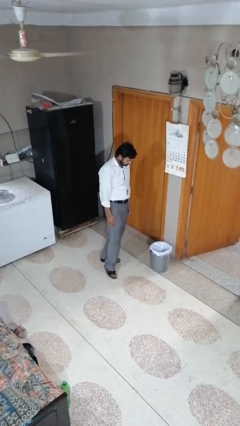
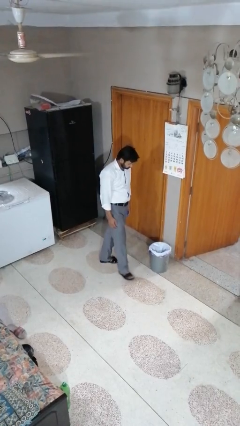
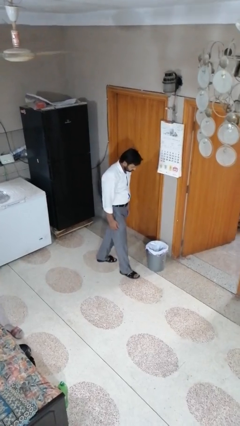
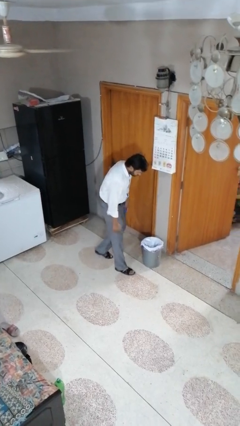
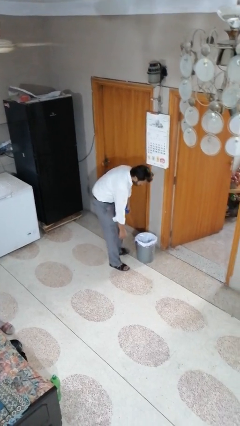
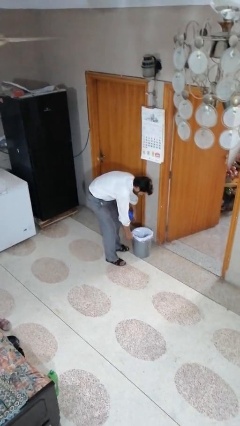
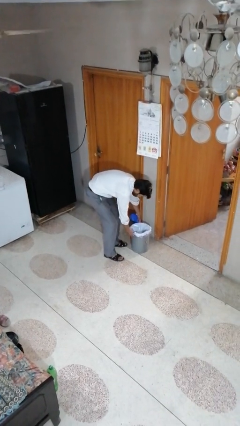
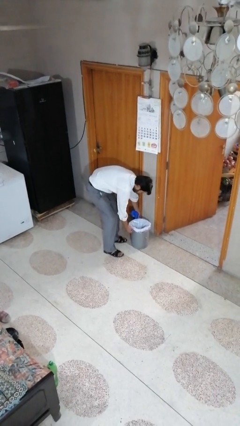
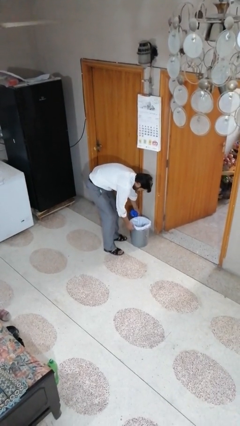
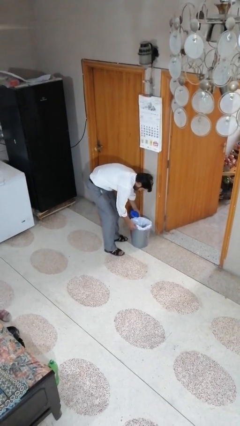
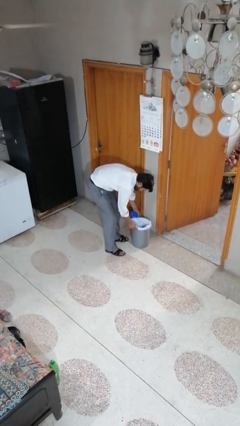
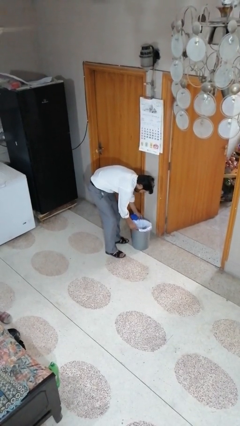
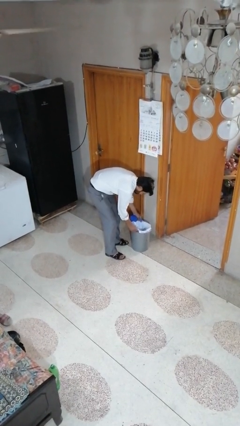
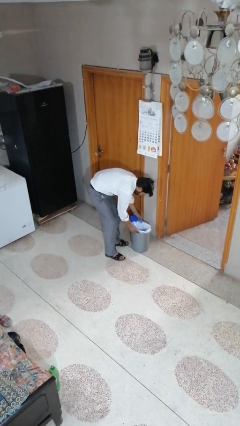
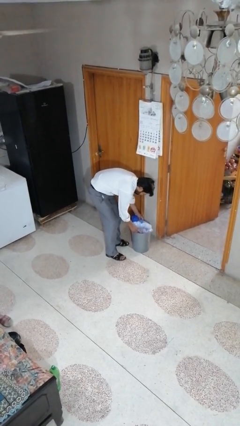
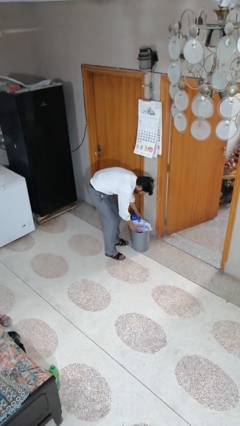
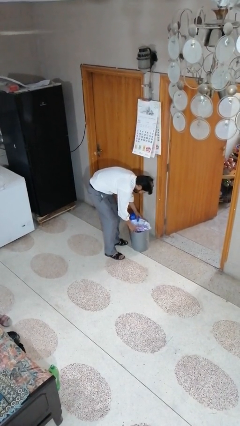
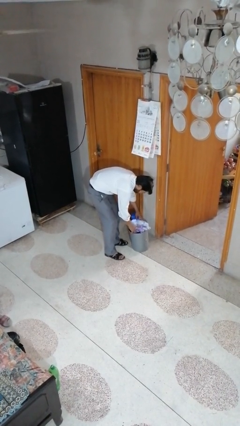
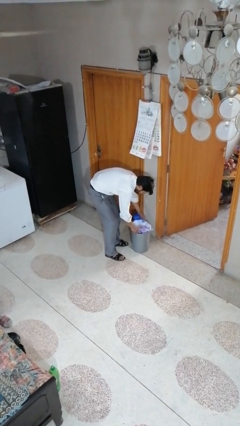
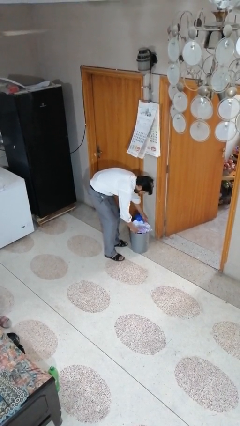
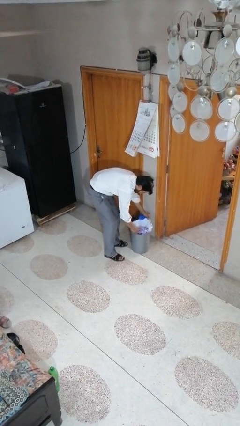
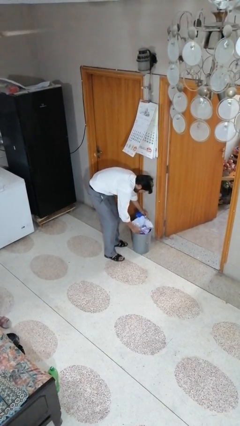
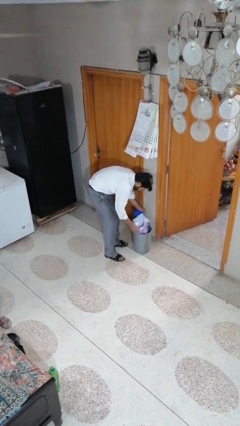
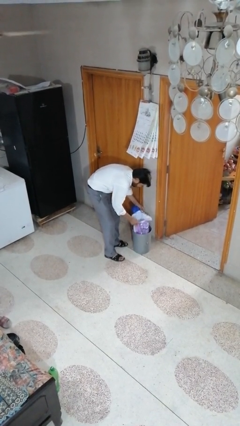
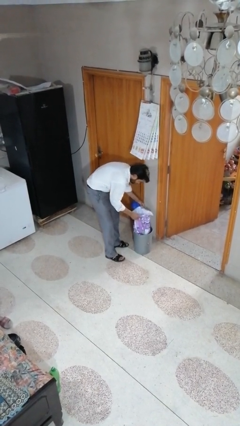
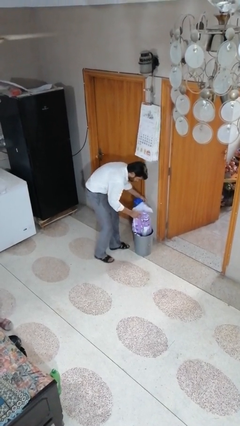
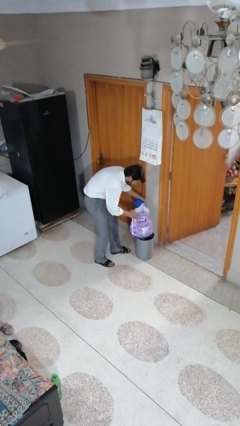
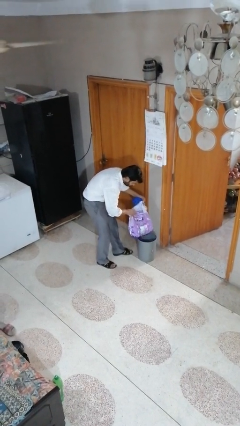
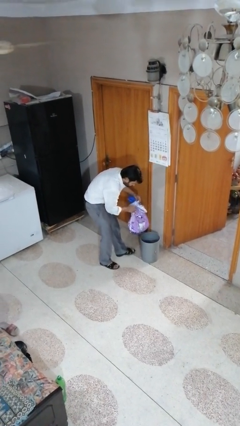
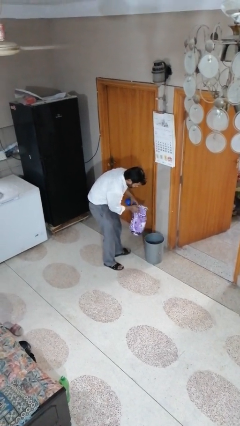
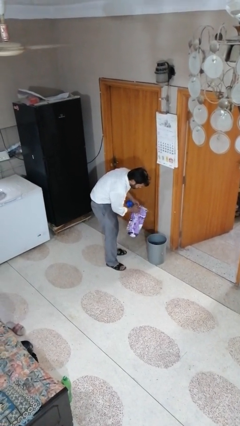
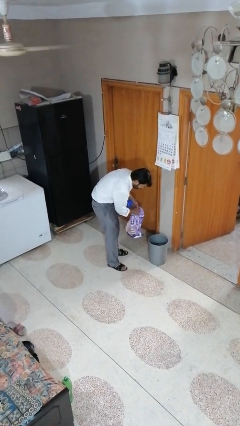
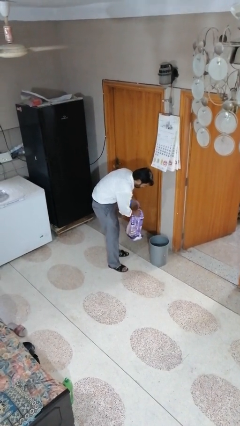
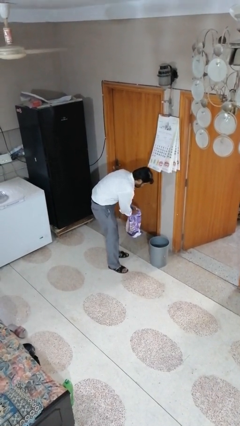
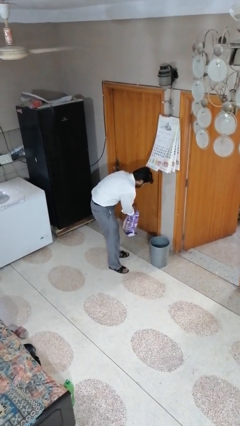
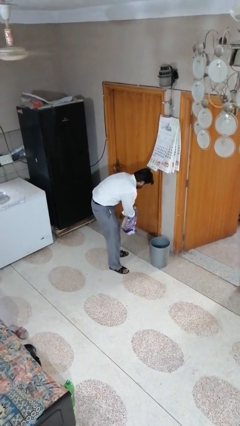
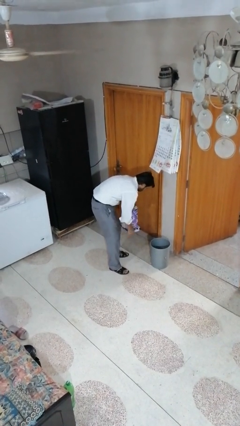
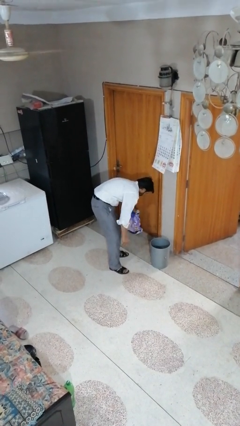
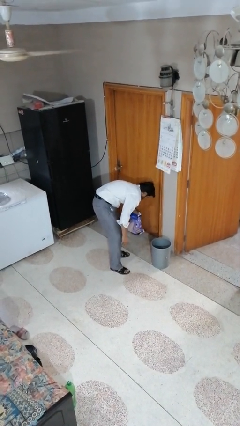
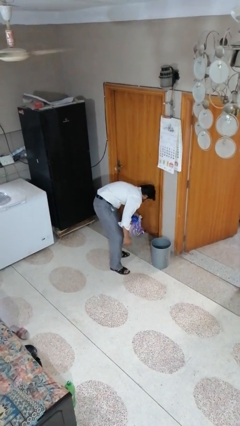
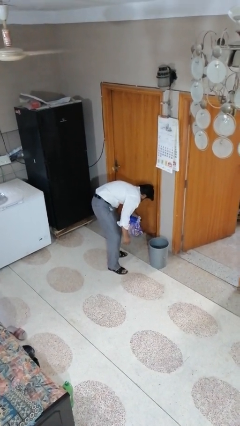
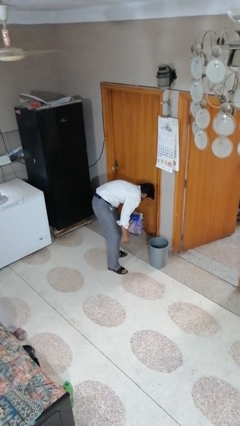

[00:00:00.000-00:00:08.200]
person removes trashbag from trashcan

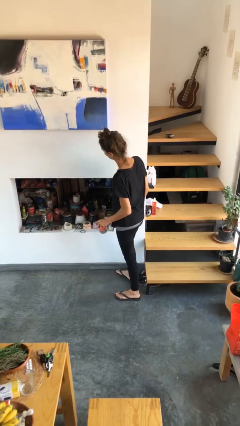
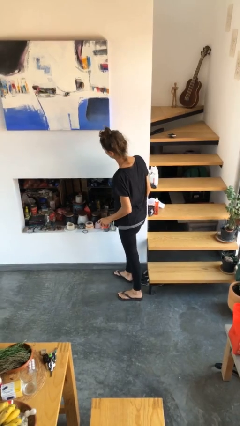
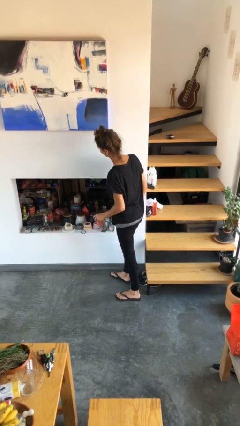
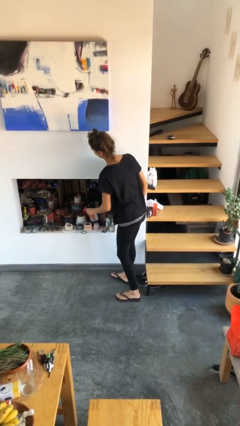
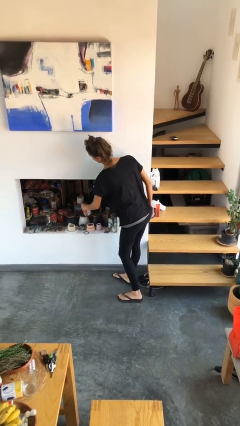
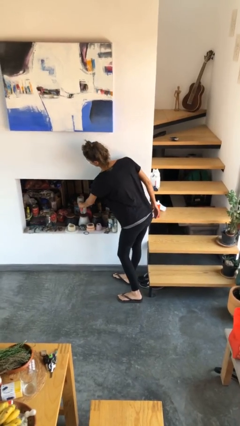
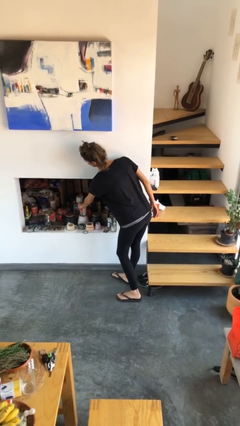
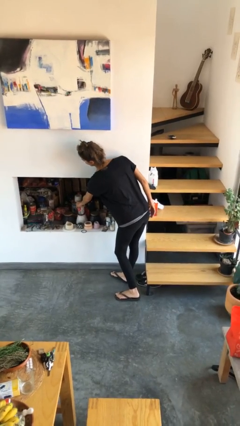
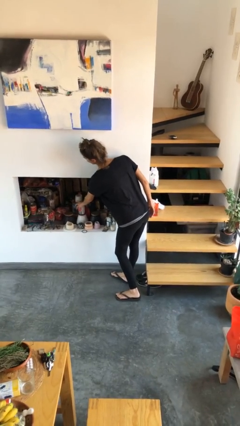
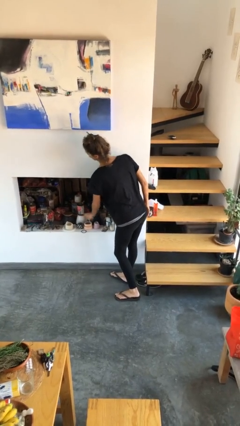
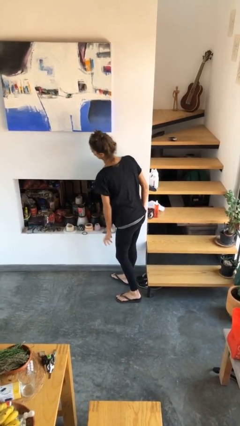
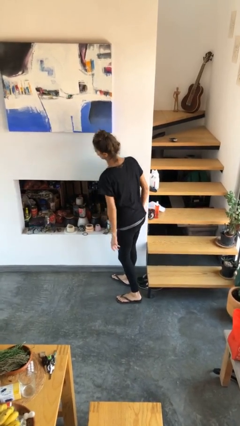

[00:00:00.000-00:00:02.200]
person puts down object into cabinet

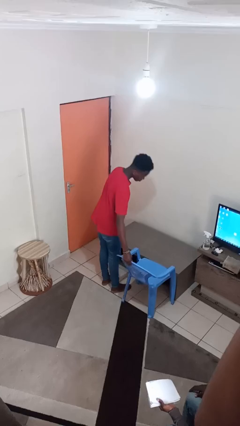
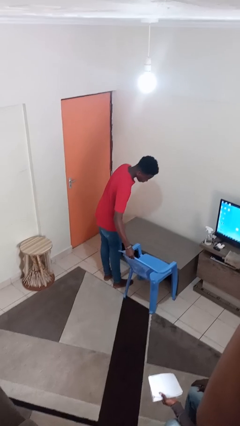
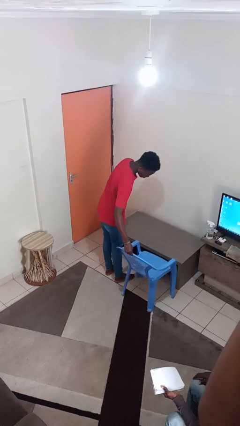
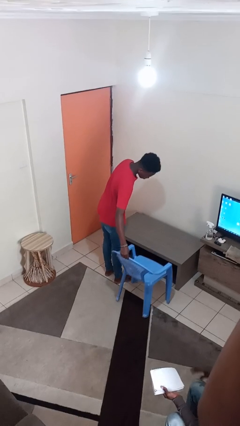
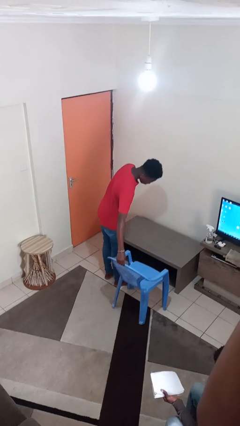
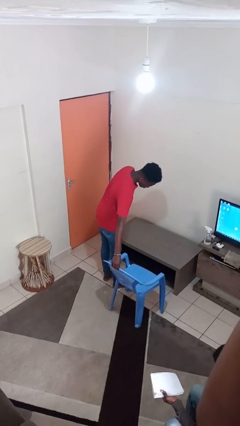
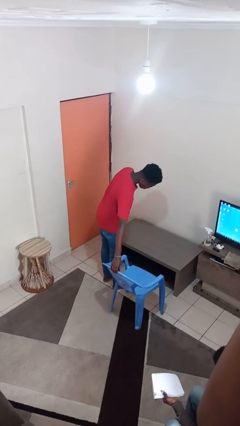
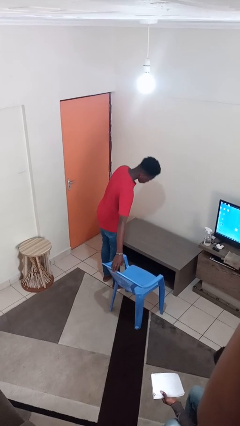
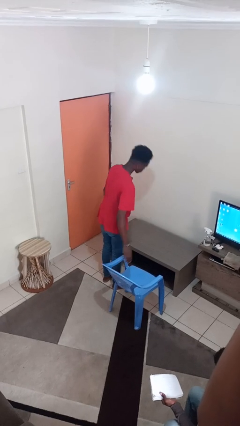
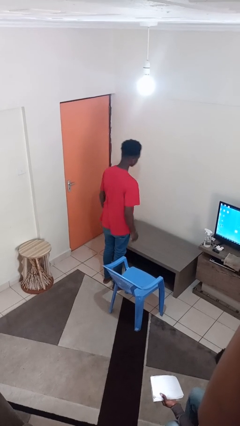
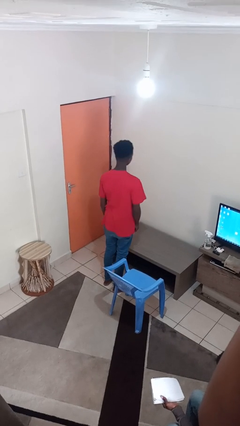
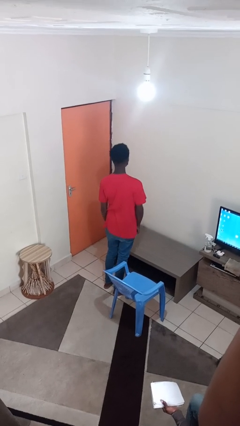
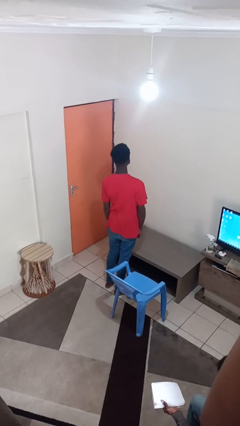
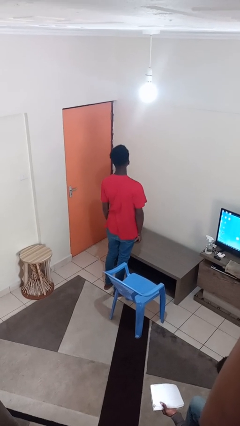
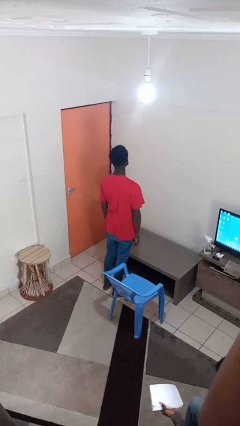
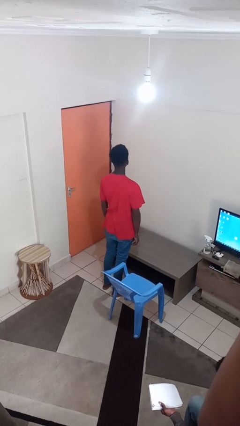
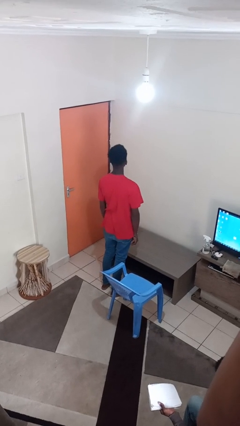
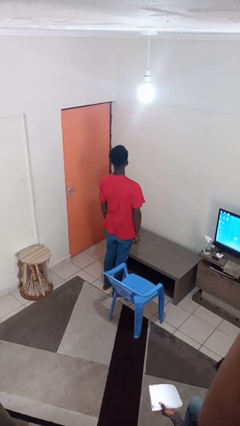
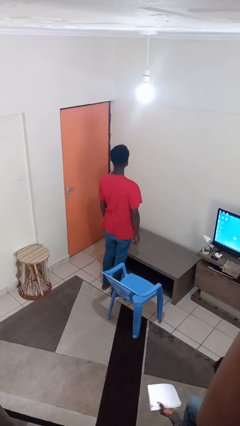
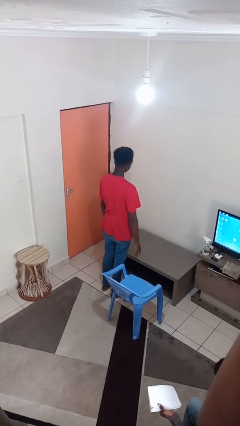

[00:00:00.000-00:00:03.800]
person pulls out chair

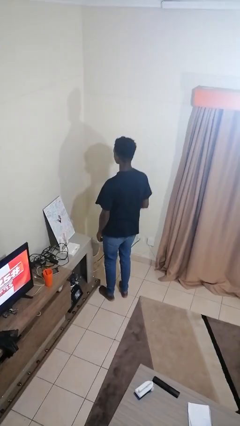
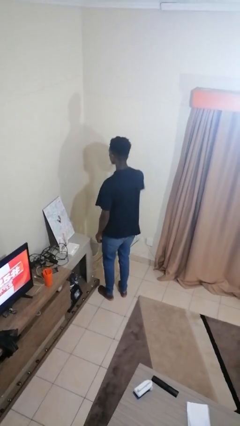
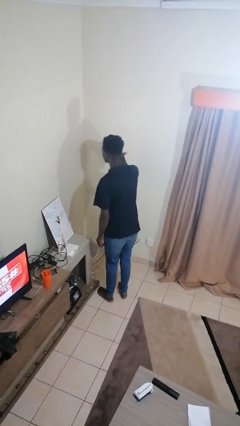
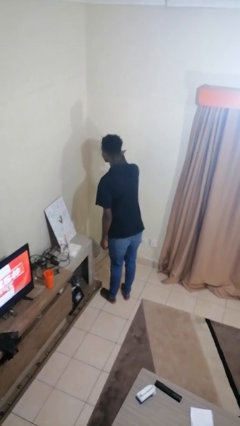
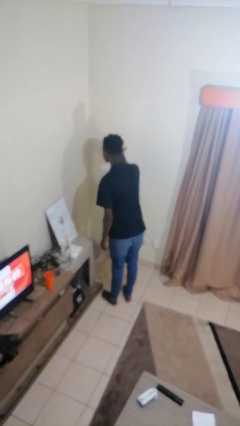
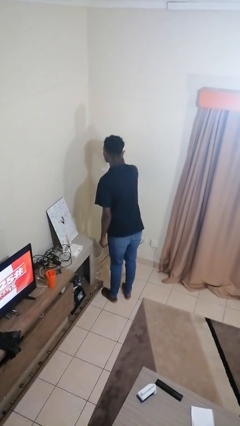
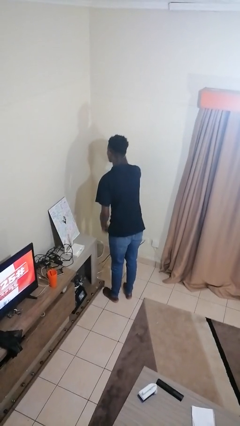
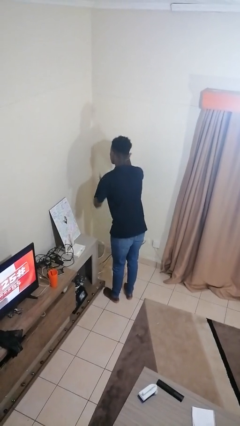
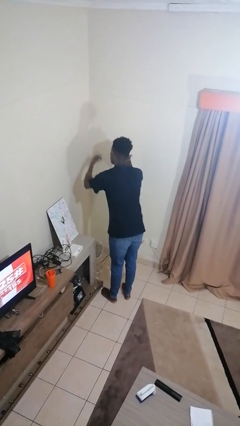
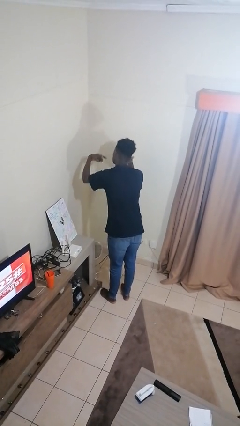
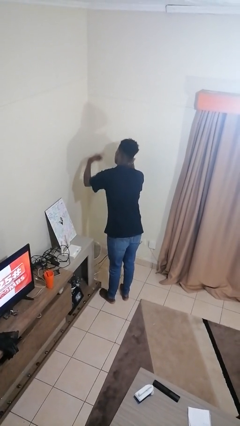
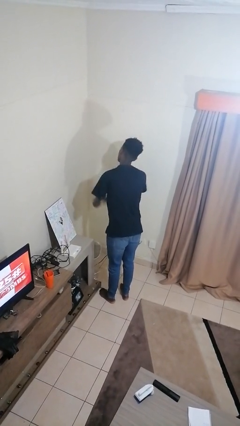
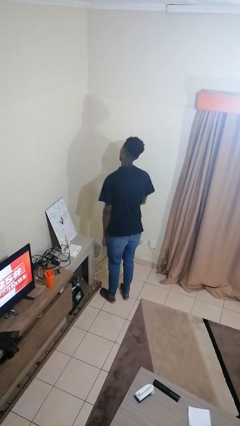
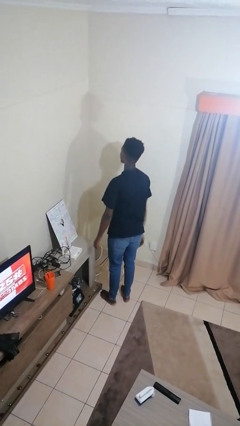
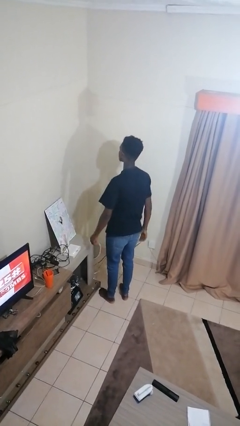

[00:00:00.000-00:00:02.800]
person gestures call me

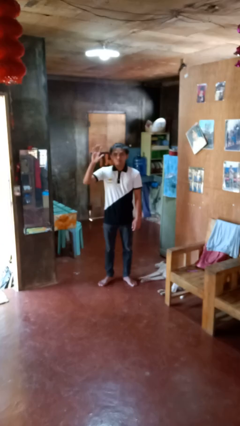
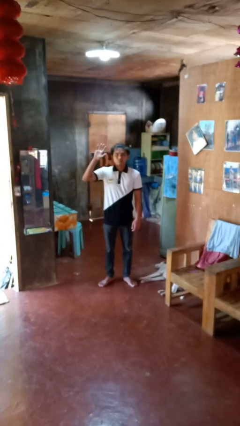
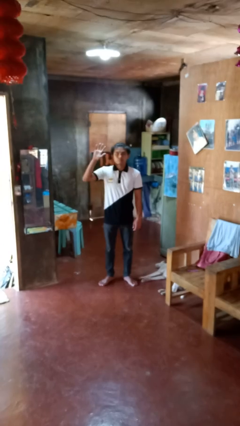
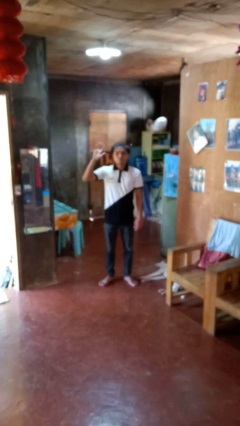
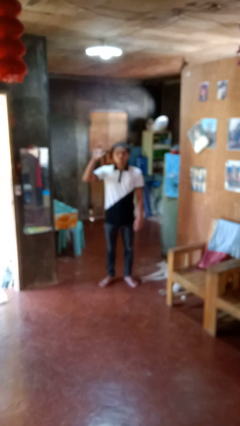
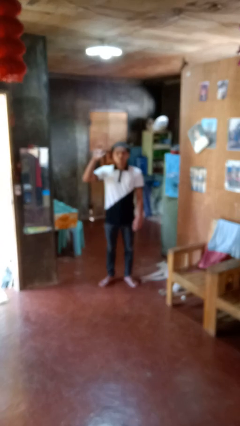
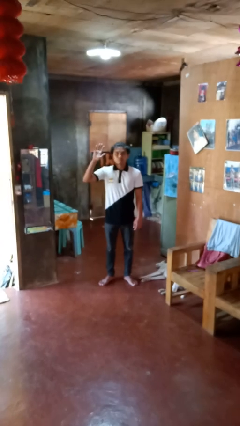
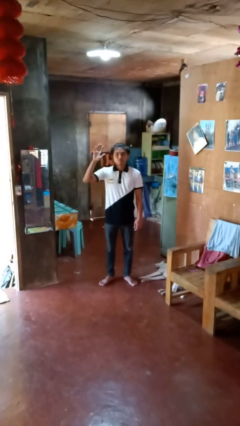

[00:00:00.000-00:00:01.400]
person gestures raise hand
